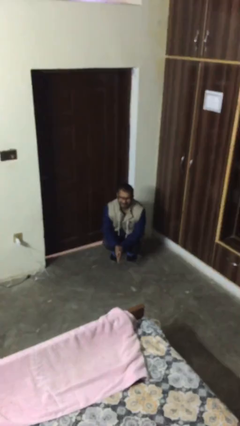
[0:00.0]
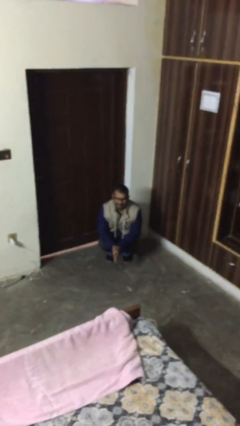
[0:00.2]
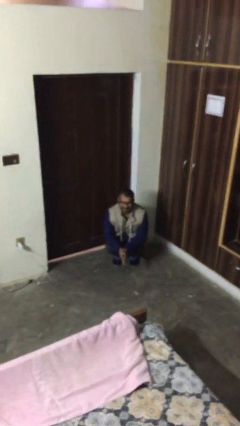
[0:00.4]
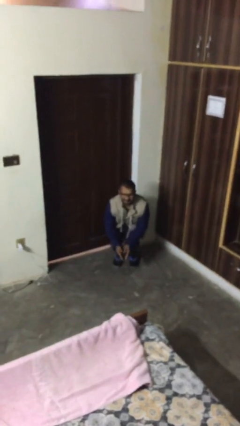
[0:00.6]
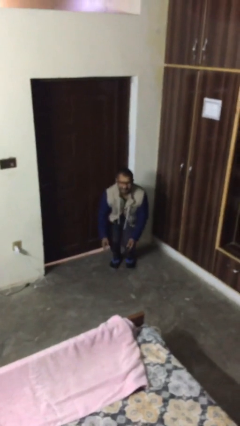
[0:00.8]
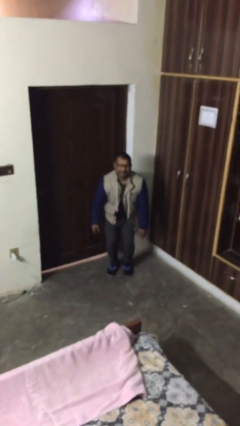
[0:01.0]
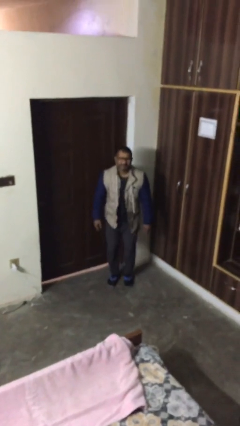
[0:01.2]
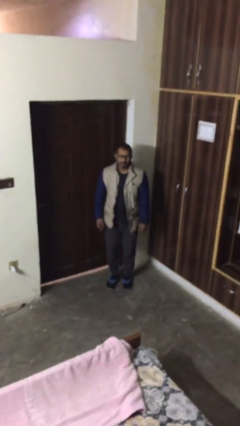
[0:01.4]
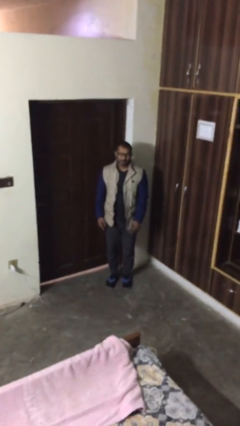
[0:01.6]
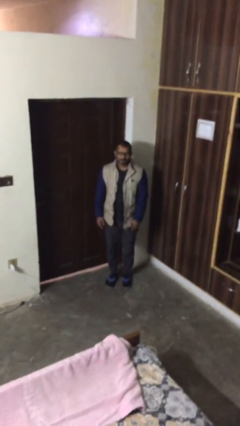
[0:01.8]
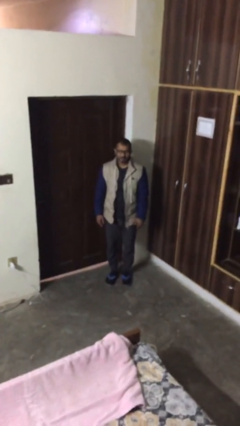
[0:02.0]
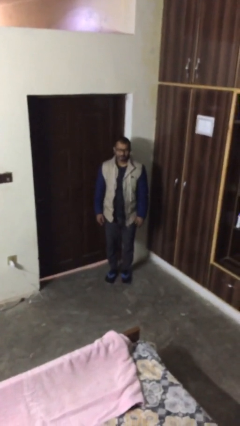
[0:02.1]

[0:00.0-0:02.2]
person stands up

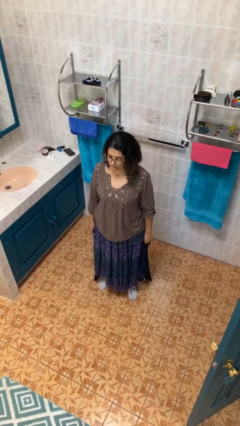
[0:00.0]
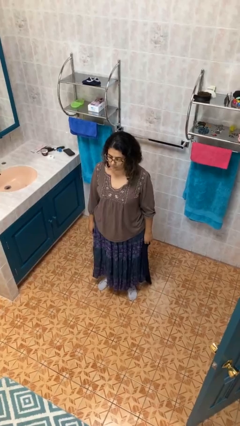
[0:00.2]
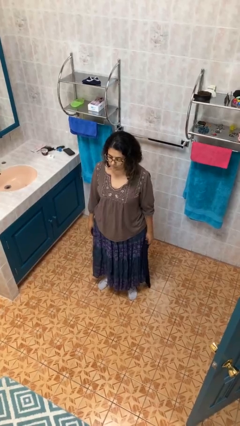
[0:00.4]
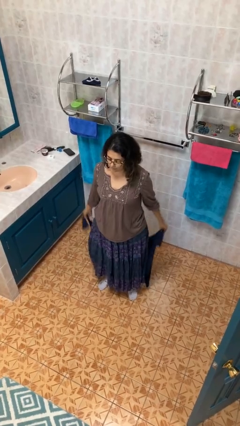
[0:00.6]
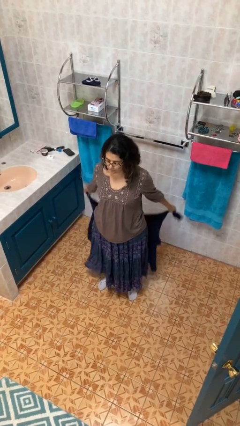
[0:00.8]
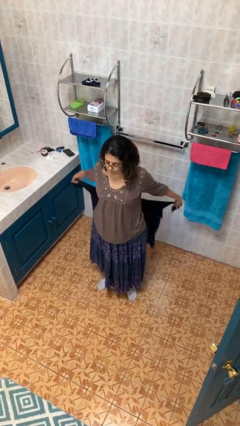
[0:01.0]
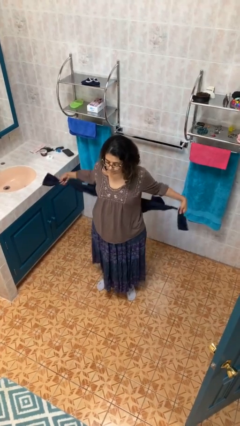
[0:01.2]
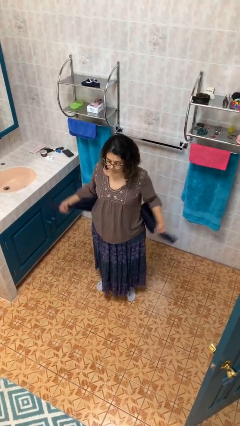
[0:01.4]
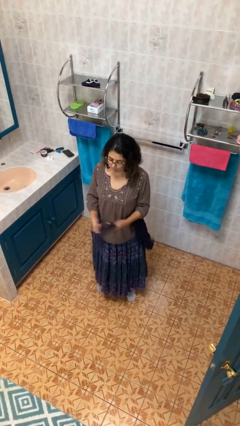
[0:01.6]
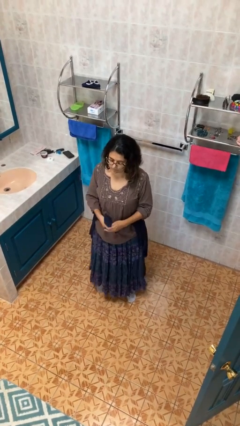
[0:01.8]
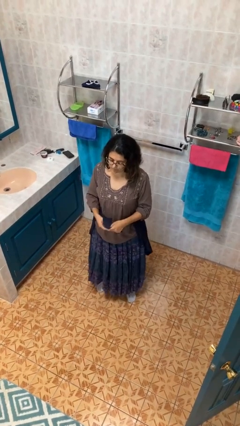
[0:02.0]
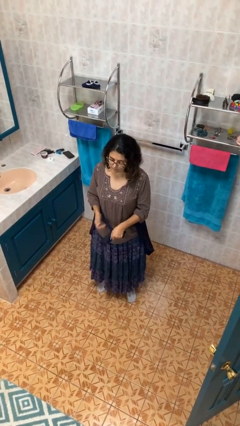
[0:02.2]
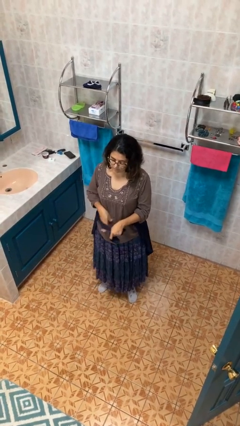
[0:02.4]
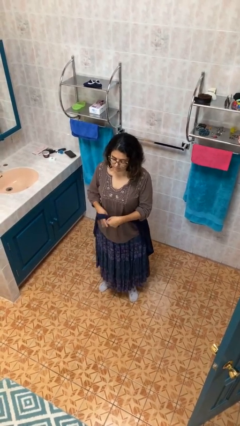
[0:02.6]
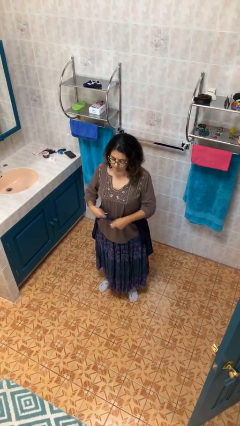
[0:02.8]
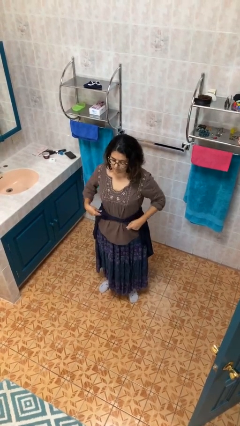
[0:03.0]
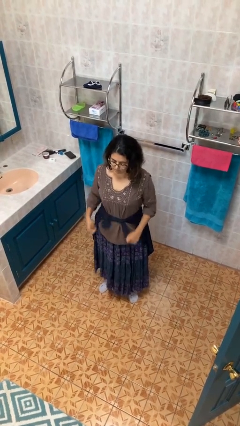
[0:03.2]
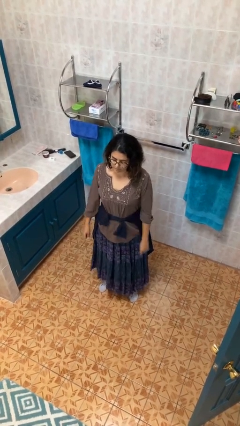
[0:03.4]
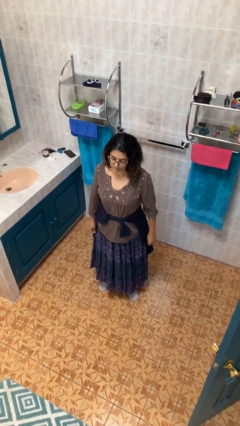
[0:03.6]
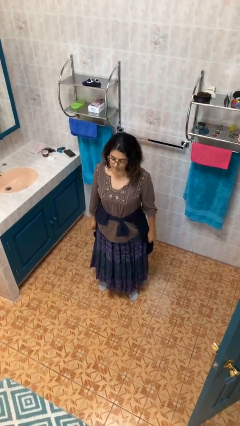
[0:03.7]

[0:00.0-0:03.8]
person ties jacket around waist

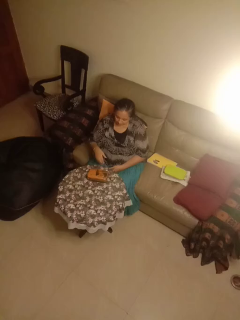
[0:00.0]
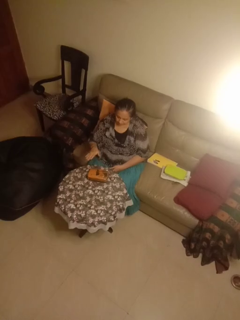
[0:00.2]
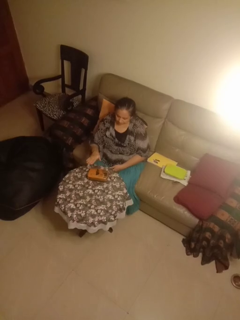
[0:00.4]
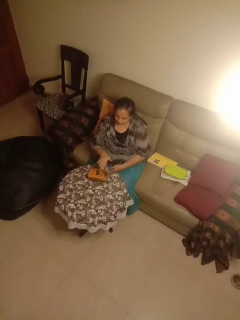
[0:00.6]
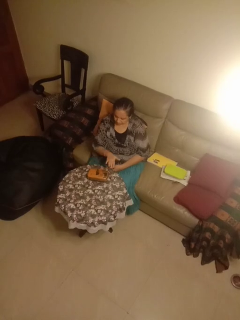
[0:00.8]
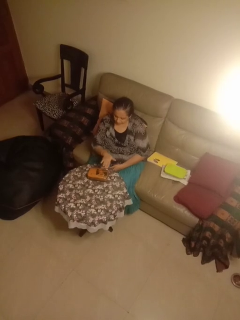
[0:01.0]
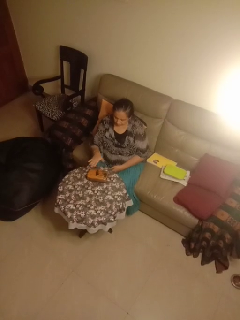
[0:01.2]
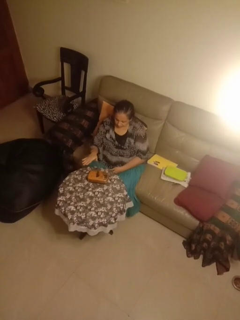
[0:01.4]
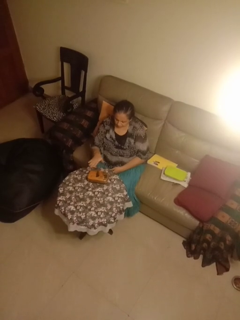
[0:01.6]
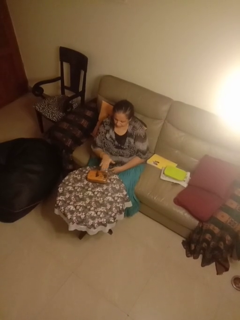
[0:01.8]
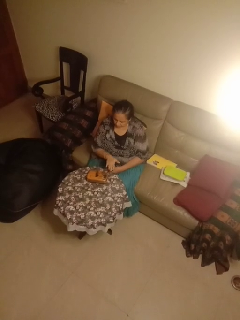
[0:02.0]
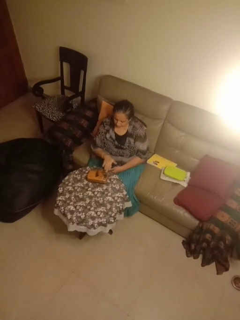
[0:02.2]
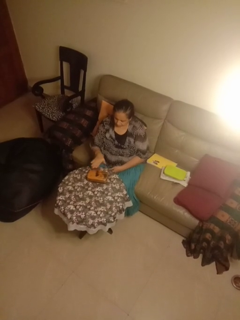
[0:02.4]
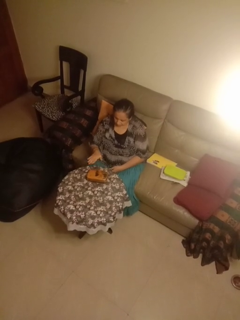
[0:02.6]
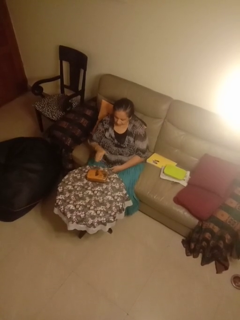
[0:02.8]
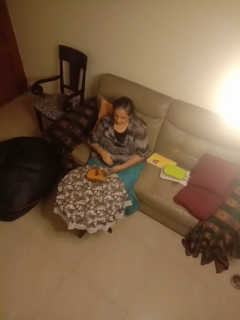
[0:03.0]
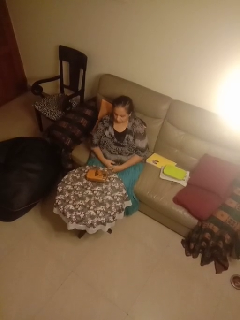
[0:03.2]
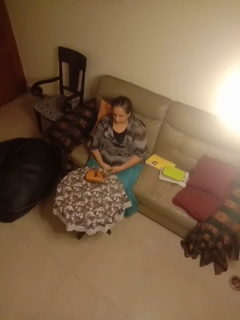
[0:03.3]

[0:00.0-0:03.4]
person waves hand over object

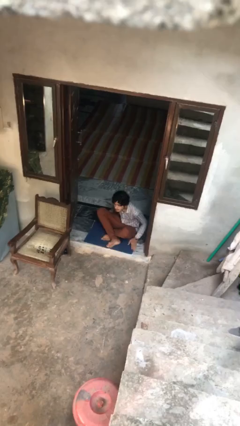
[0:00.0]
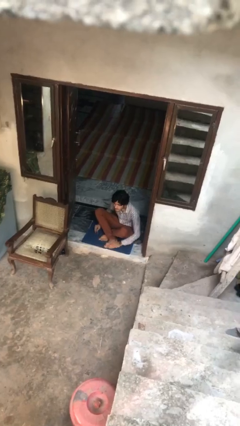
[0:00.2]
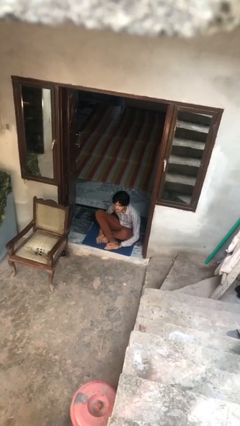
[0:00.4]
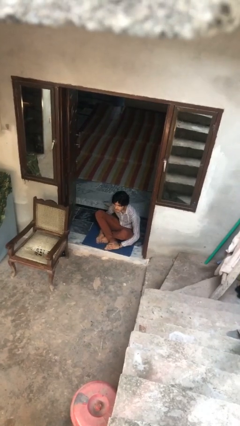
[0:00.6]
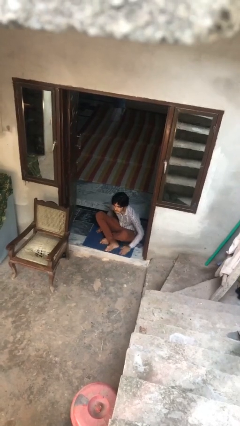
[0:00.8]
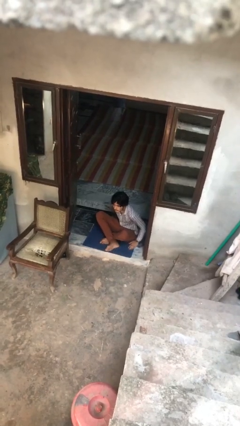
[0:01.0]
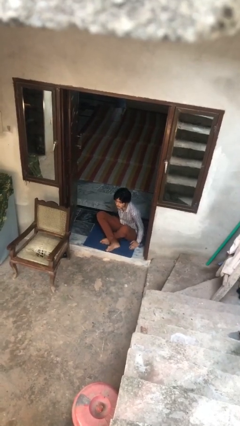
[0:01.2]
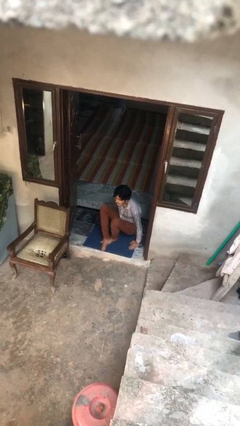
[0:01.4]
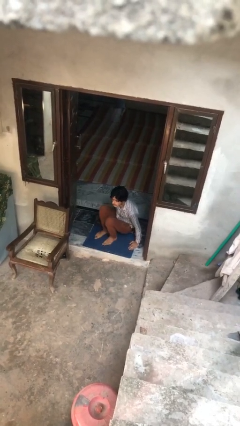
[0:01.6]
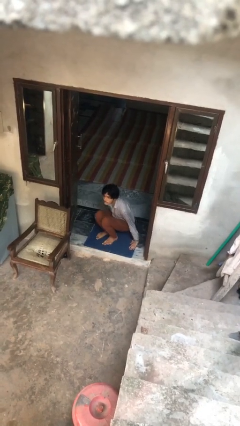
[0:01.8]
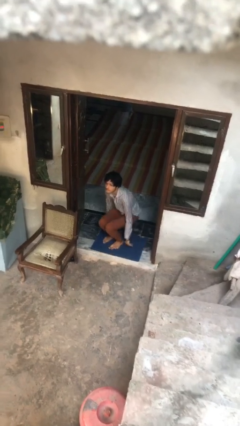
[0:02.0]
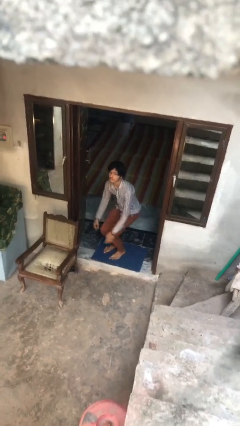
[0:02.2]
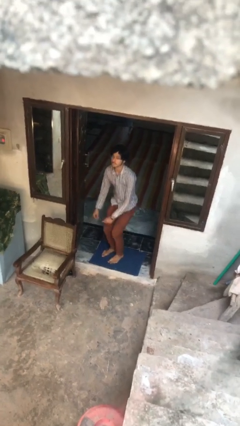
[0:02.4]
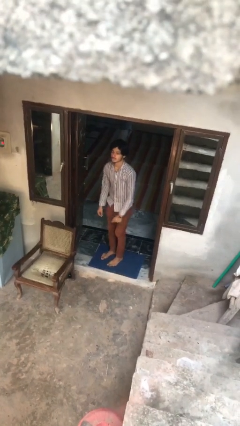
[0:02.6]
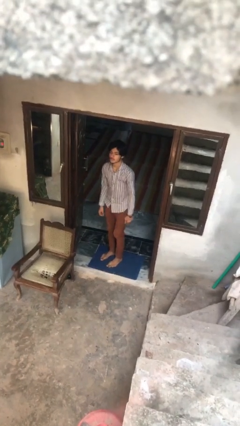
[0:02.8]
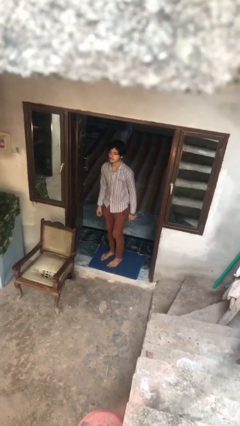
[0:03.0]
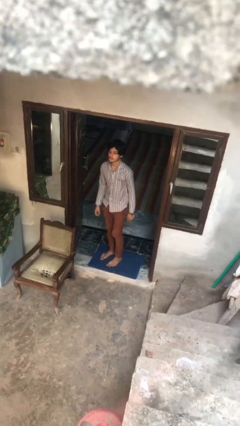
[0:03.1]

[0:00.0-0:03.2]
person stands up from floor

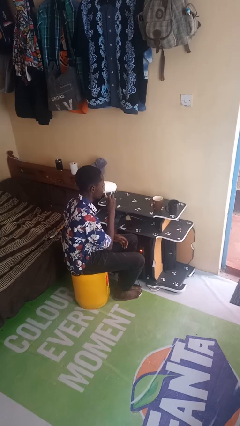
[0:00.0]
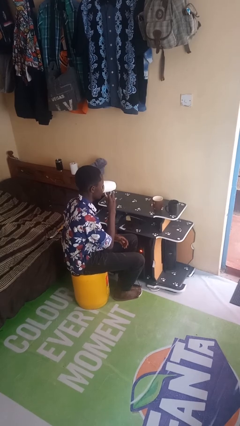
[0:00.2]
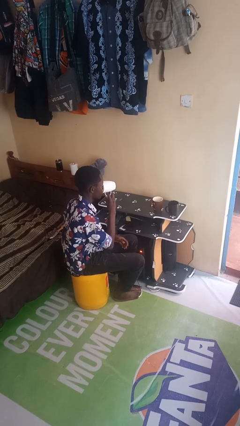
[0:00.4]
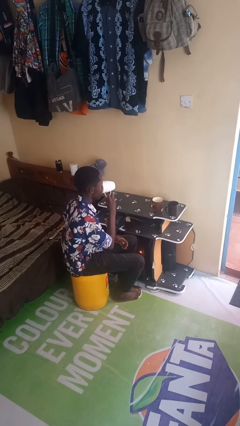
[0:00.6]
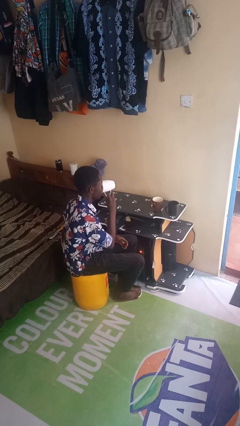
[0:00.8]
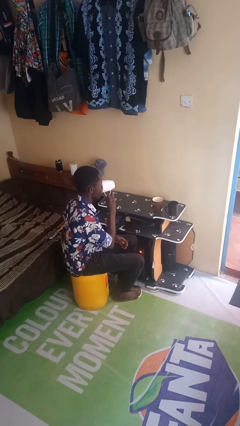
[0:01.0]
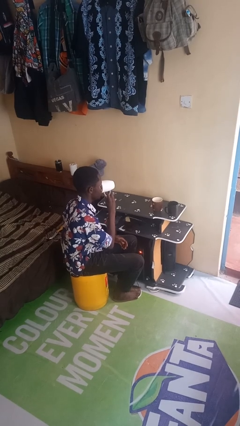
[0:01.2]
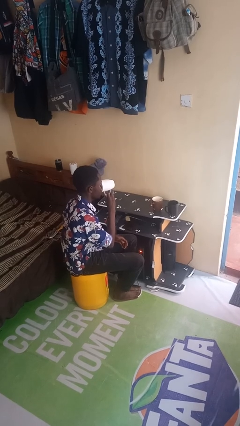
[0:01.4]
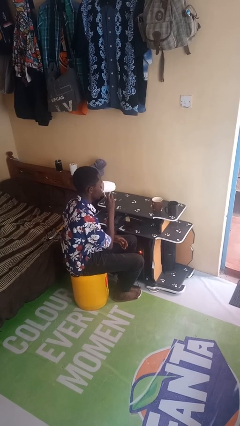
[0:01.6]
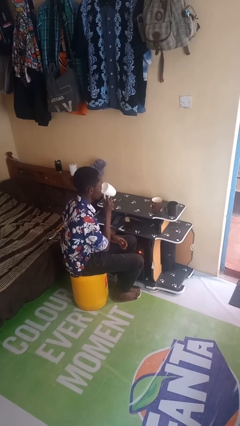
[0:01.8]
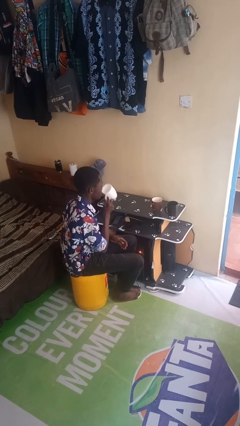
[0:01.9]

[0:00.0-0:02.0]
person drinks from shotglass

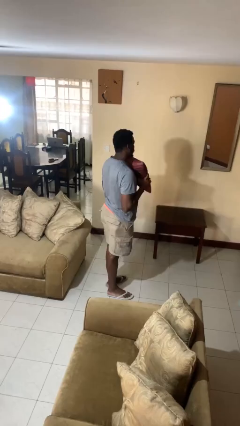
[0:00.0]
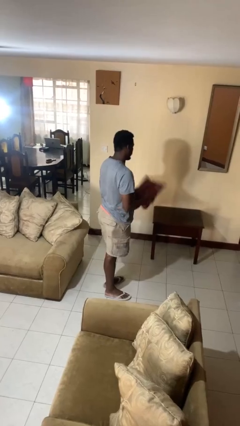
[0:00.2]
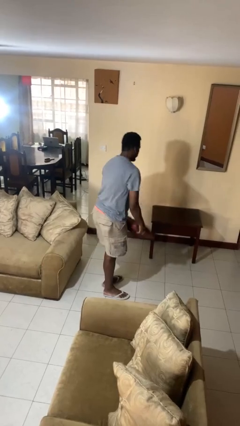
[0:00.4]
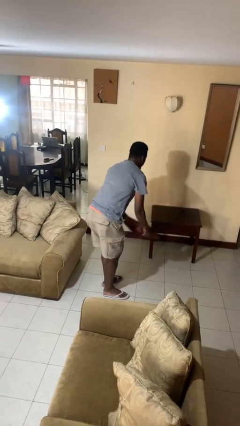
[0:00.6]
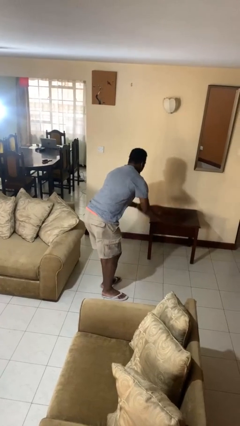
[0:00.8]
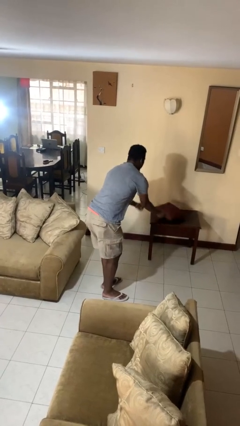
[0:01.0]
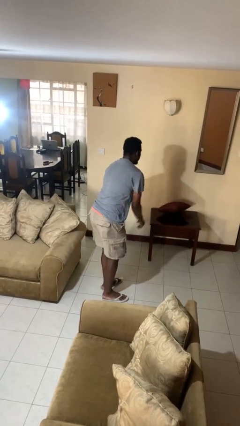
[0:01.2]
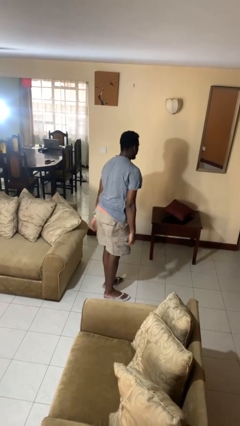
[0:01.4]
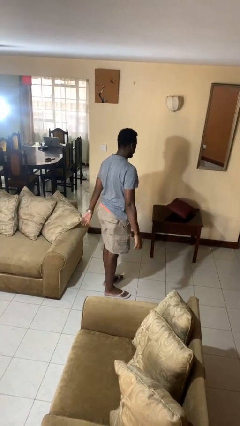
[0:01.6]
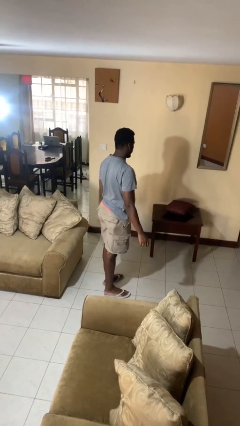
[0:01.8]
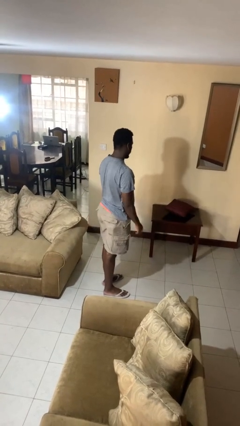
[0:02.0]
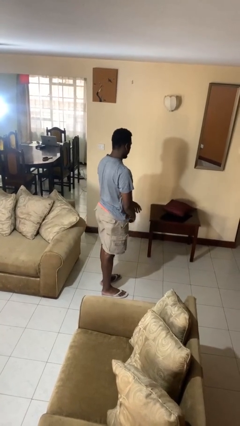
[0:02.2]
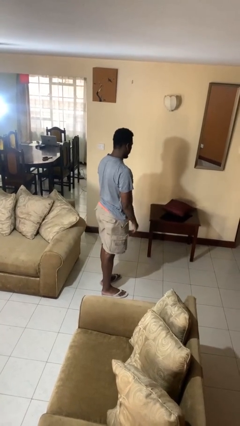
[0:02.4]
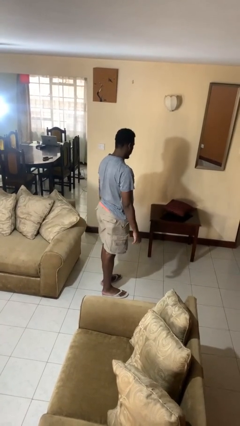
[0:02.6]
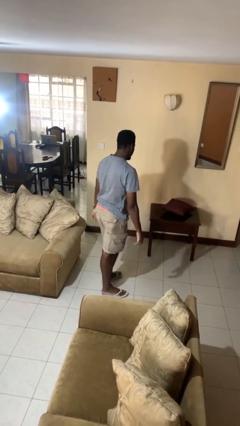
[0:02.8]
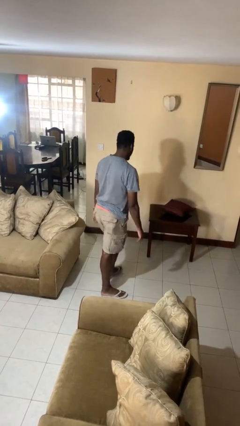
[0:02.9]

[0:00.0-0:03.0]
person throws object on table

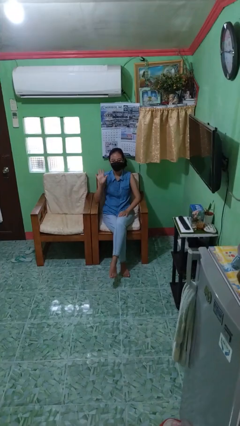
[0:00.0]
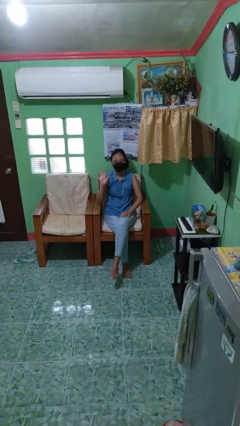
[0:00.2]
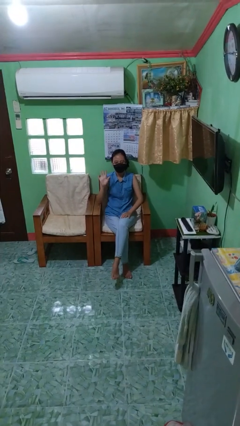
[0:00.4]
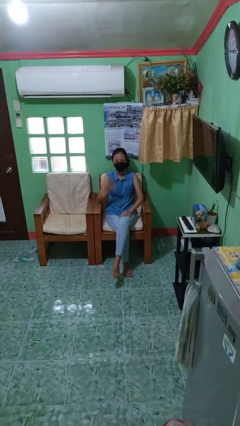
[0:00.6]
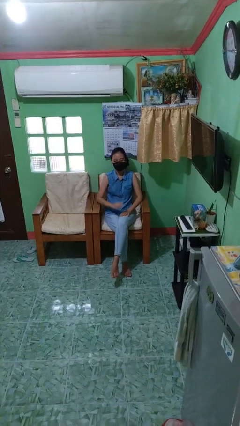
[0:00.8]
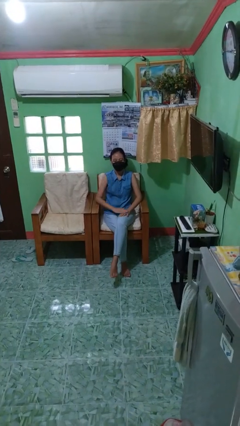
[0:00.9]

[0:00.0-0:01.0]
person gestures number five
